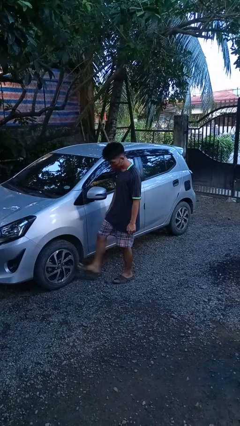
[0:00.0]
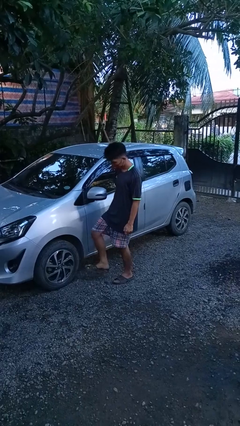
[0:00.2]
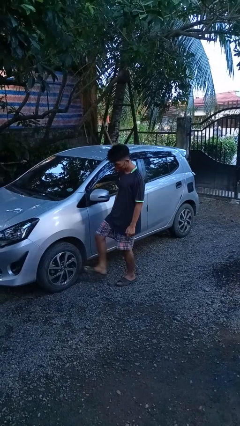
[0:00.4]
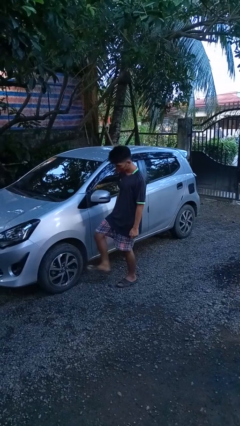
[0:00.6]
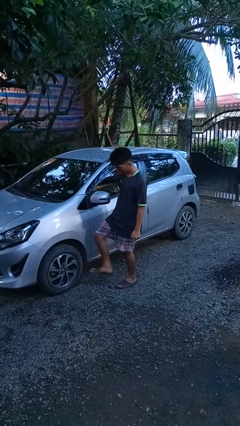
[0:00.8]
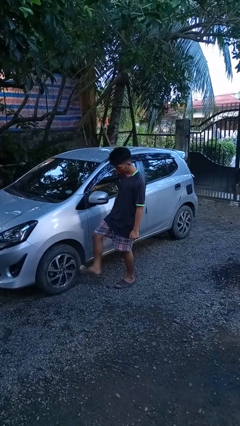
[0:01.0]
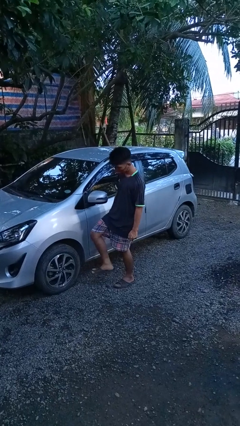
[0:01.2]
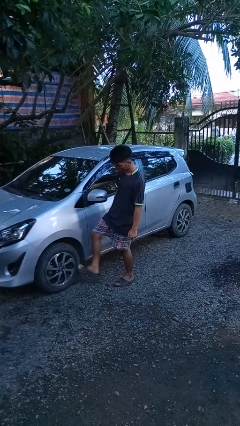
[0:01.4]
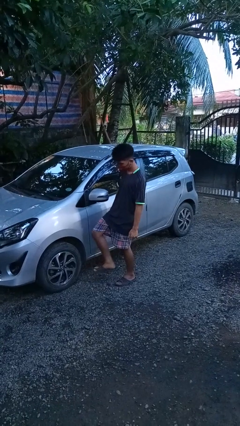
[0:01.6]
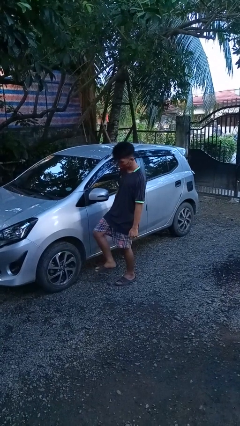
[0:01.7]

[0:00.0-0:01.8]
person kicks car tires

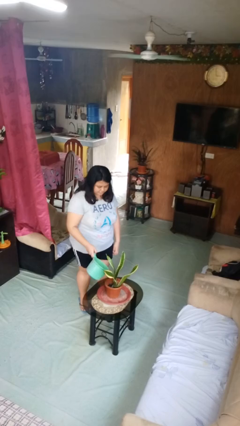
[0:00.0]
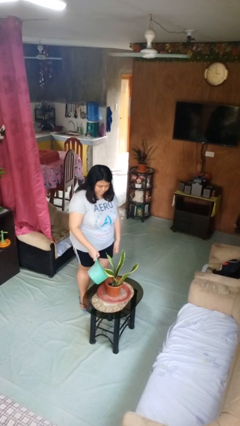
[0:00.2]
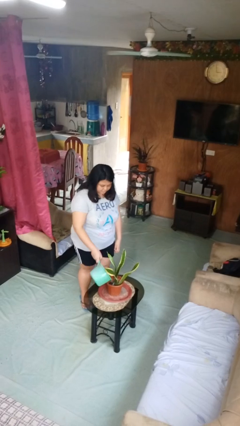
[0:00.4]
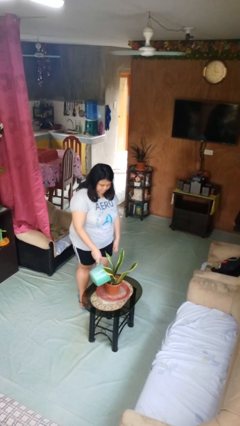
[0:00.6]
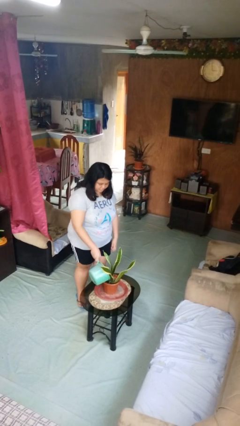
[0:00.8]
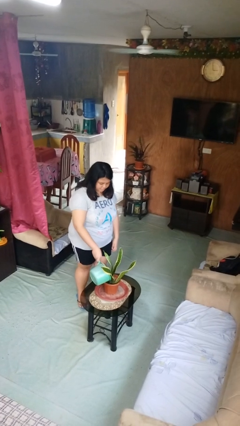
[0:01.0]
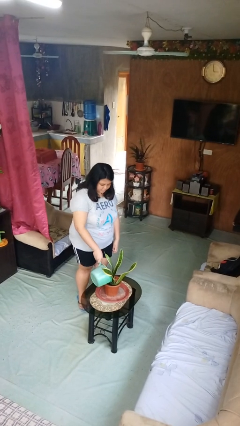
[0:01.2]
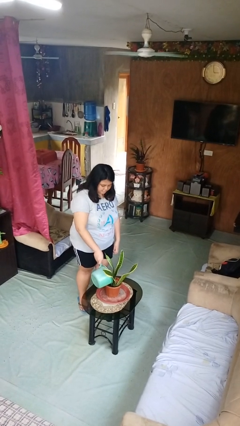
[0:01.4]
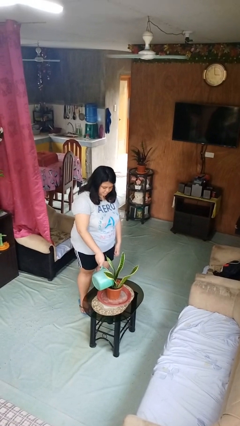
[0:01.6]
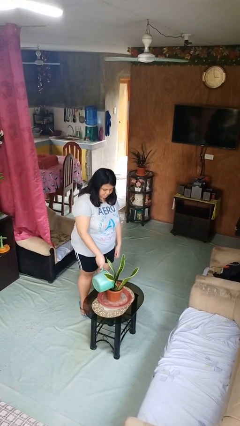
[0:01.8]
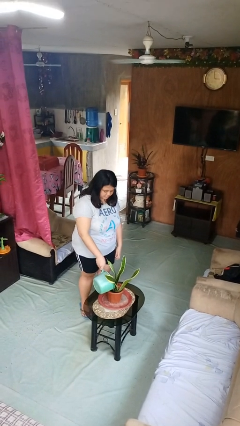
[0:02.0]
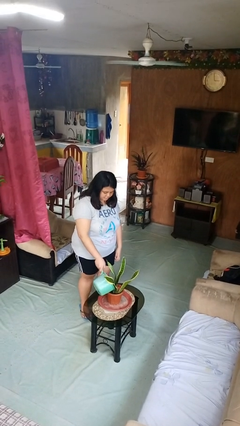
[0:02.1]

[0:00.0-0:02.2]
person waters houseplant

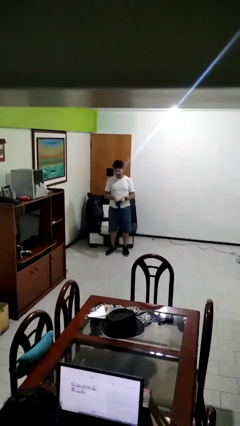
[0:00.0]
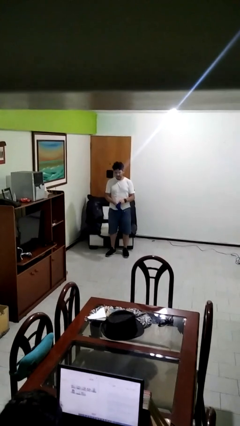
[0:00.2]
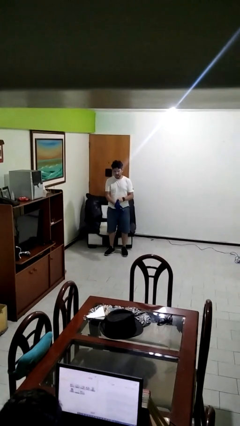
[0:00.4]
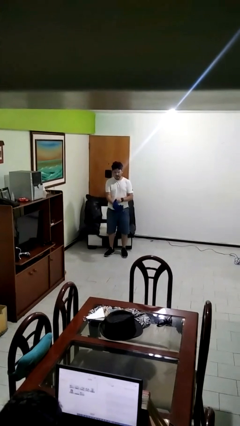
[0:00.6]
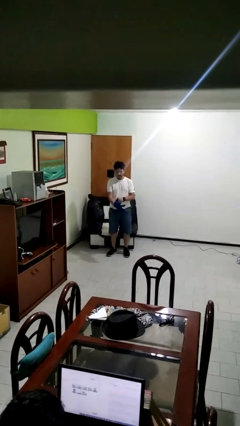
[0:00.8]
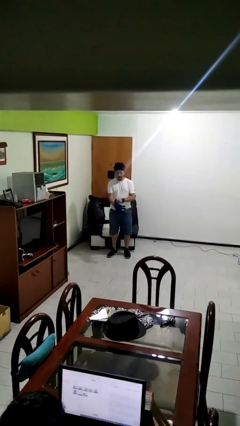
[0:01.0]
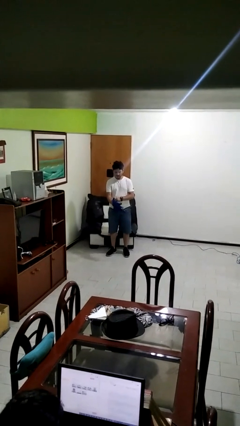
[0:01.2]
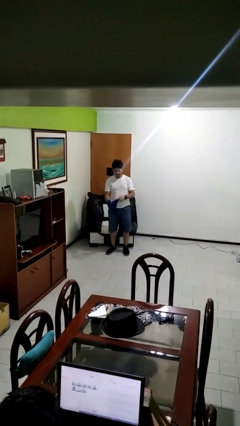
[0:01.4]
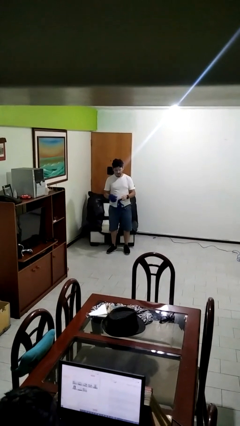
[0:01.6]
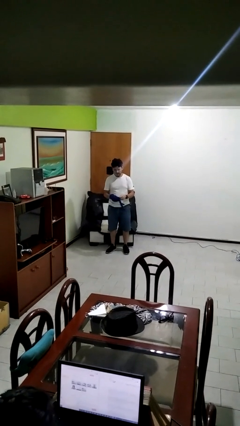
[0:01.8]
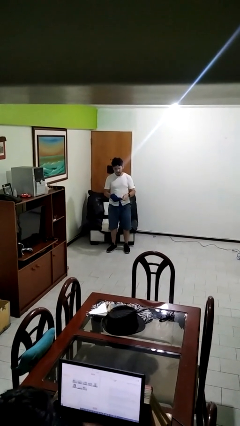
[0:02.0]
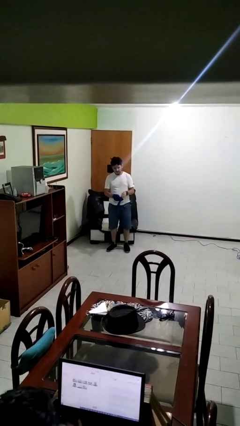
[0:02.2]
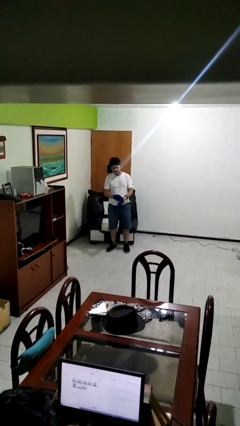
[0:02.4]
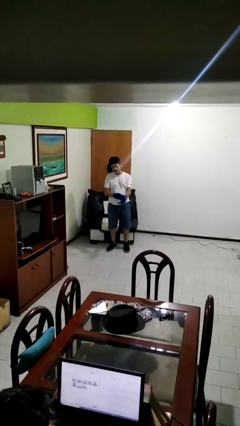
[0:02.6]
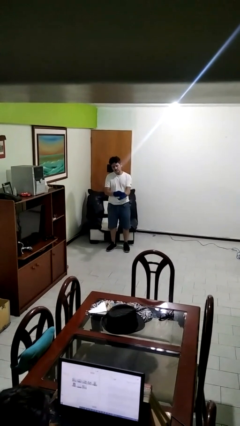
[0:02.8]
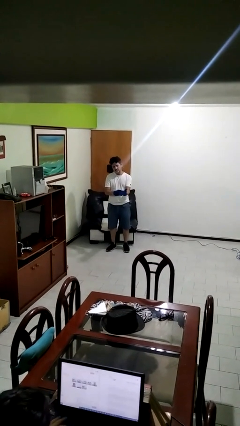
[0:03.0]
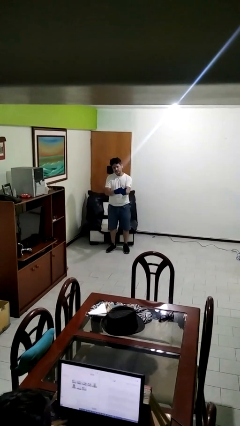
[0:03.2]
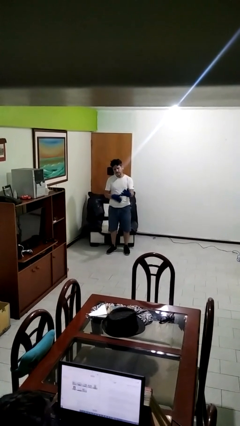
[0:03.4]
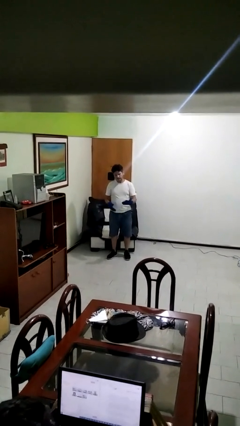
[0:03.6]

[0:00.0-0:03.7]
person puts on gloves

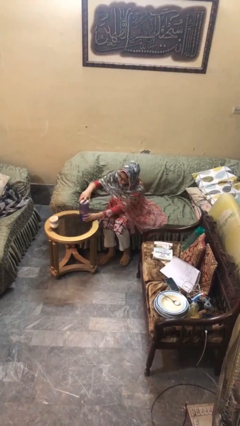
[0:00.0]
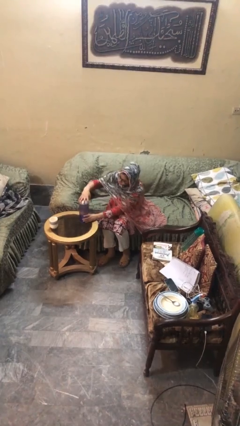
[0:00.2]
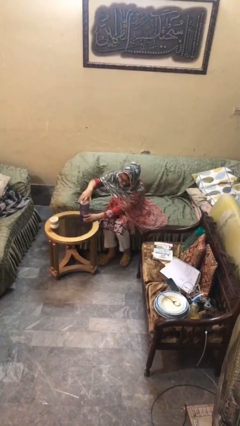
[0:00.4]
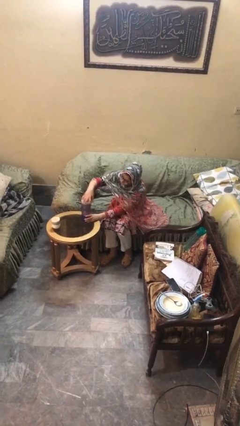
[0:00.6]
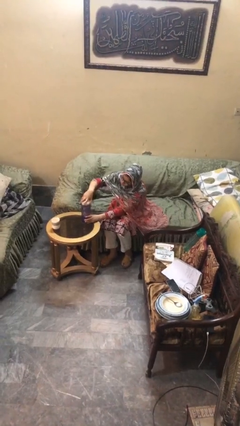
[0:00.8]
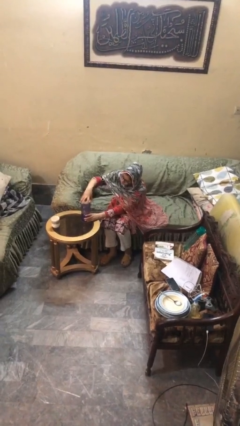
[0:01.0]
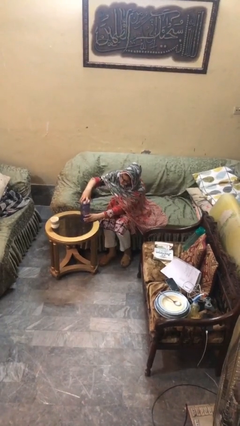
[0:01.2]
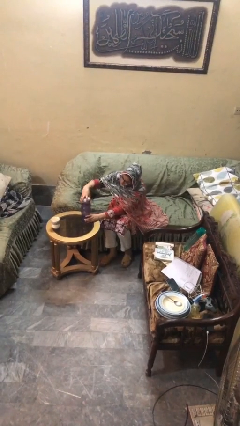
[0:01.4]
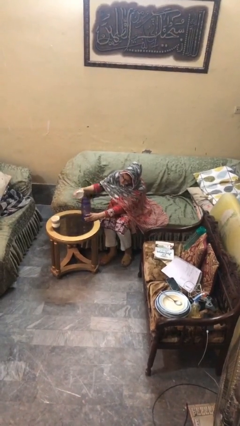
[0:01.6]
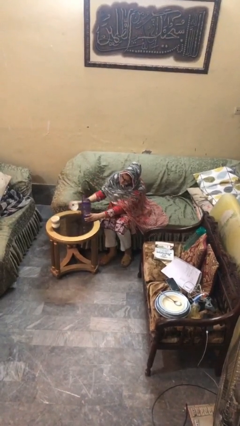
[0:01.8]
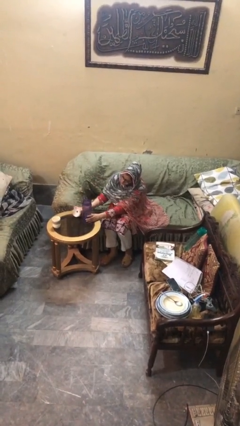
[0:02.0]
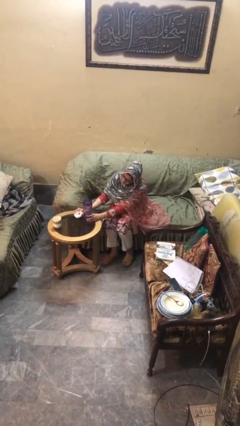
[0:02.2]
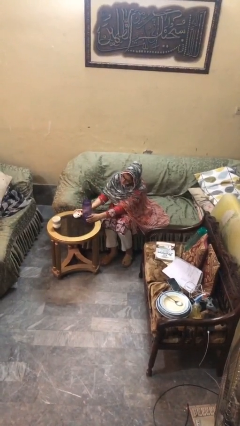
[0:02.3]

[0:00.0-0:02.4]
person unscrews lid from bottle

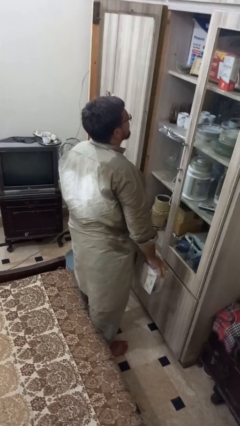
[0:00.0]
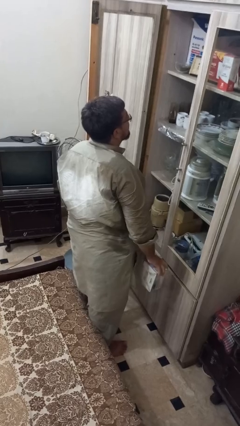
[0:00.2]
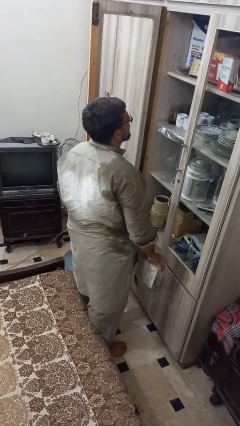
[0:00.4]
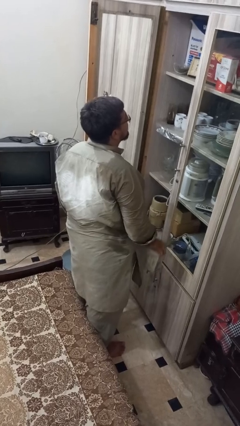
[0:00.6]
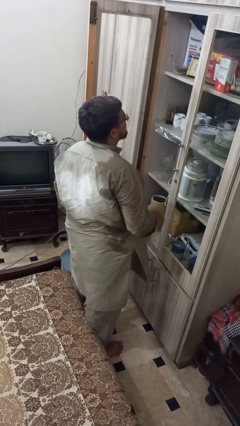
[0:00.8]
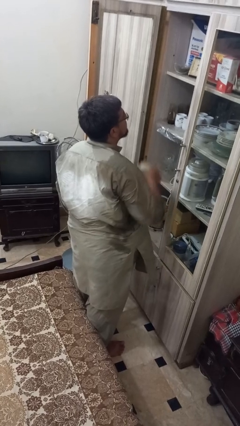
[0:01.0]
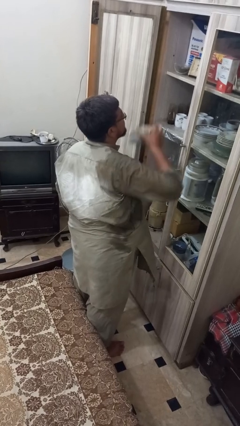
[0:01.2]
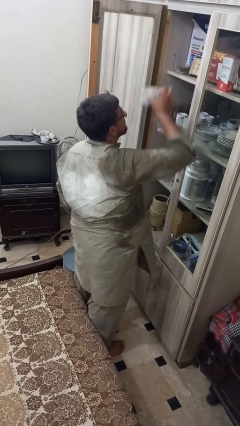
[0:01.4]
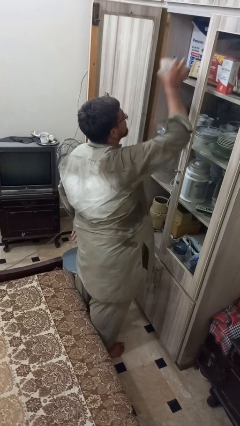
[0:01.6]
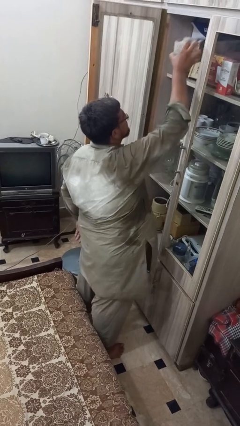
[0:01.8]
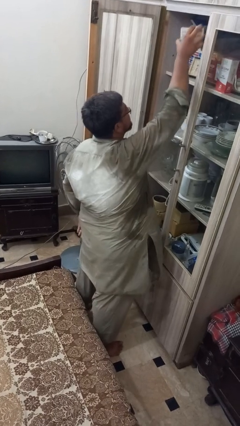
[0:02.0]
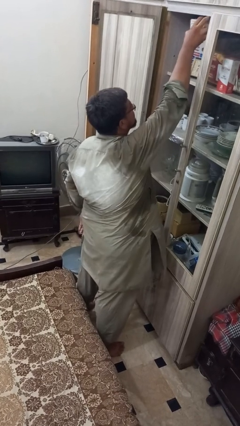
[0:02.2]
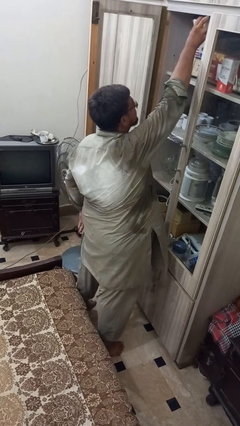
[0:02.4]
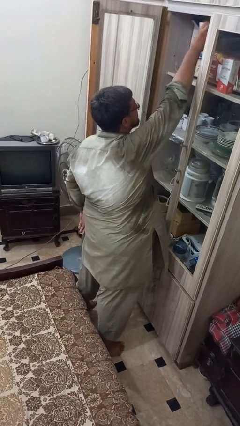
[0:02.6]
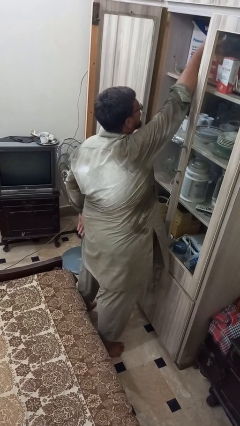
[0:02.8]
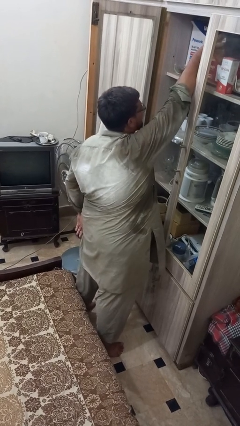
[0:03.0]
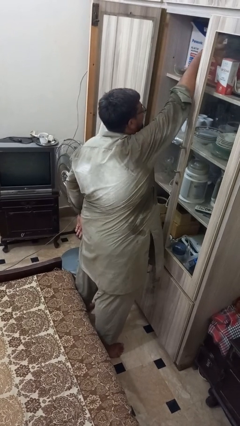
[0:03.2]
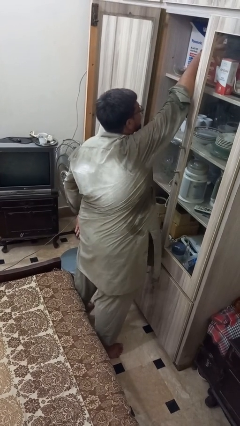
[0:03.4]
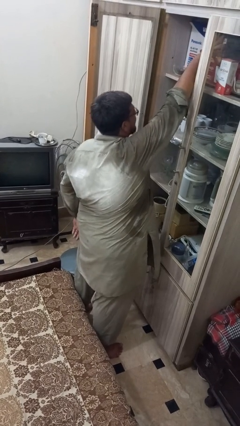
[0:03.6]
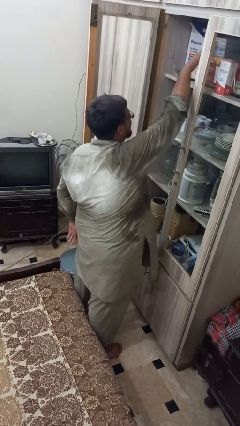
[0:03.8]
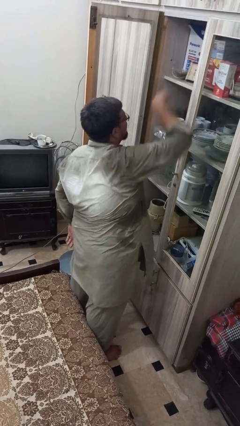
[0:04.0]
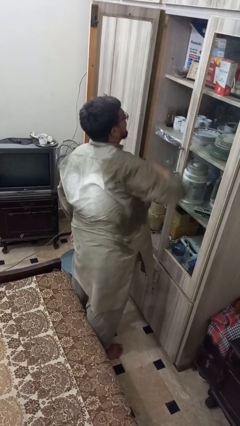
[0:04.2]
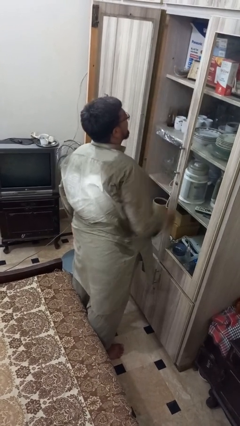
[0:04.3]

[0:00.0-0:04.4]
person puts down object on shelf

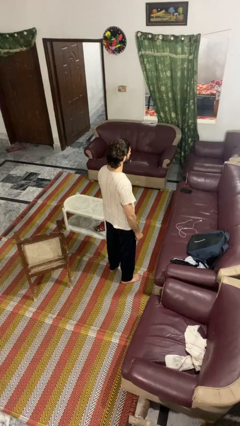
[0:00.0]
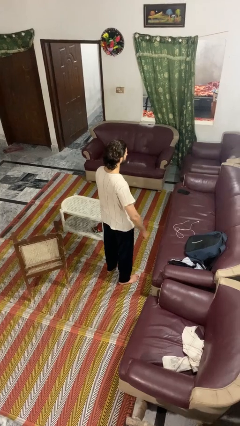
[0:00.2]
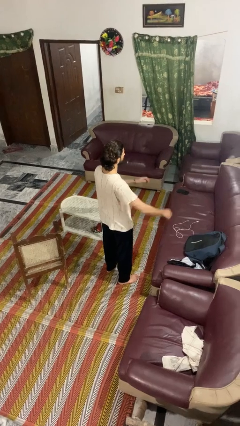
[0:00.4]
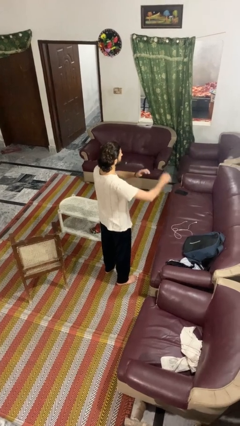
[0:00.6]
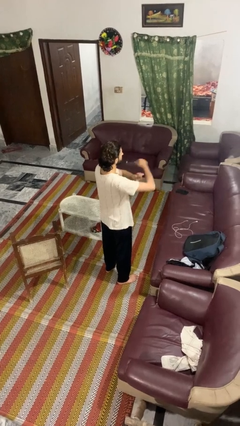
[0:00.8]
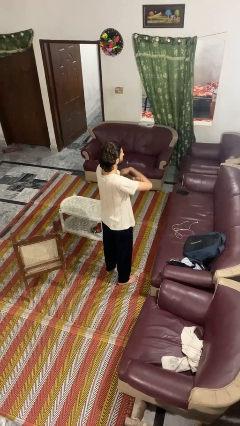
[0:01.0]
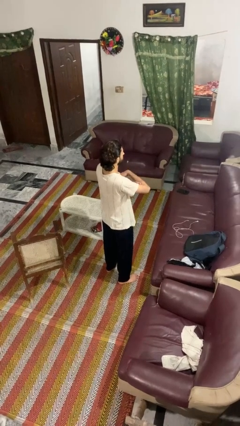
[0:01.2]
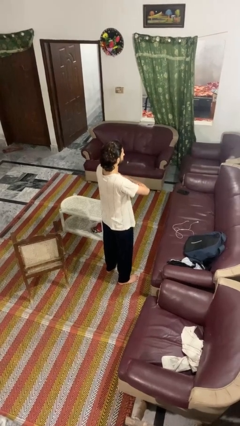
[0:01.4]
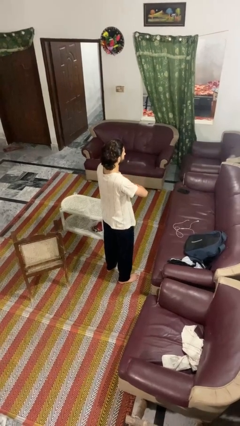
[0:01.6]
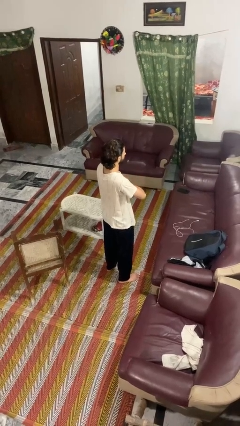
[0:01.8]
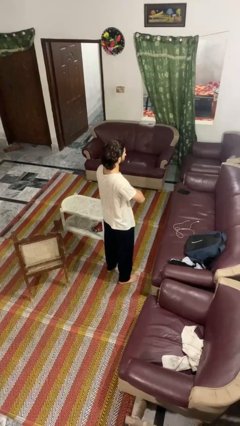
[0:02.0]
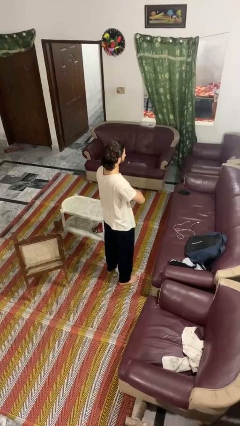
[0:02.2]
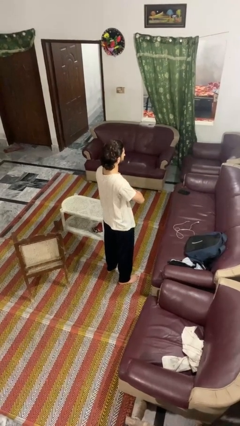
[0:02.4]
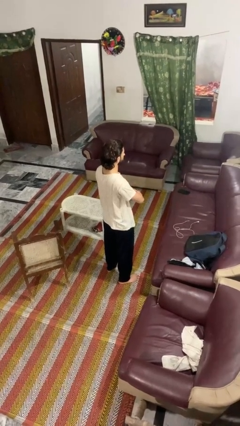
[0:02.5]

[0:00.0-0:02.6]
person crosses arms

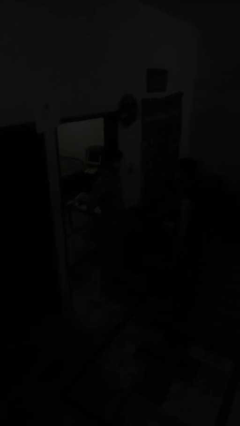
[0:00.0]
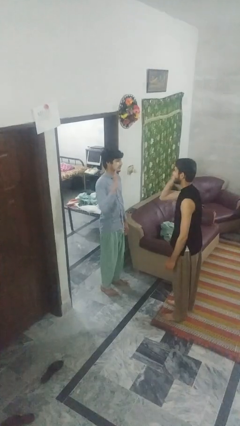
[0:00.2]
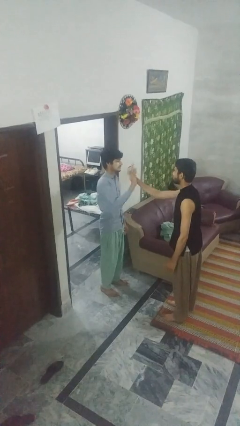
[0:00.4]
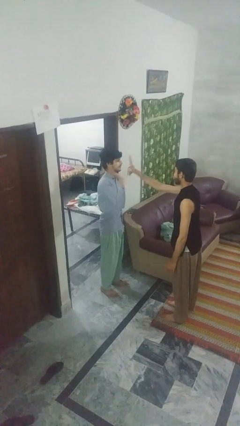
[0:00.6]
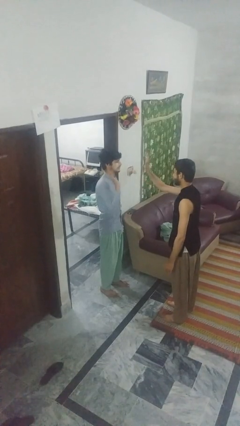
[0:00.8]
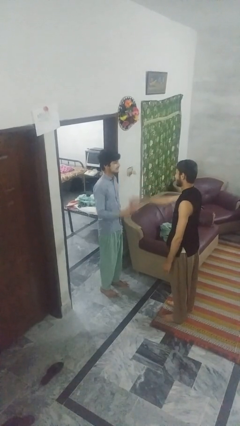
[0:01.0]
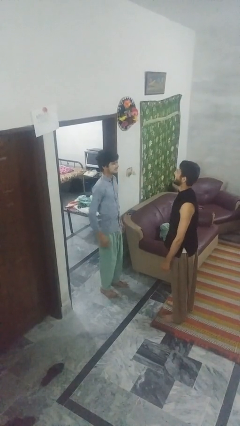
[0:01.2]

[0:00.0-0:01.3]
person highfives hand
